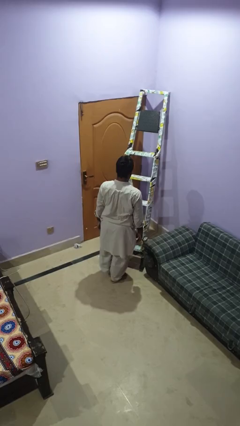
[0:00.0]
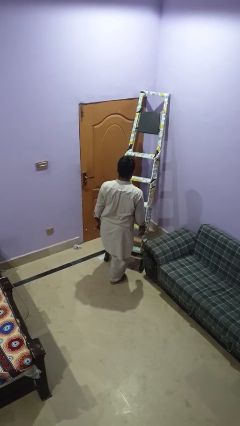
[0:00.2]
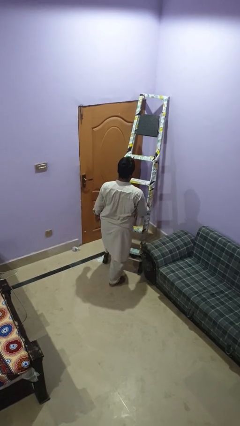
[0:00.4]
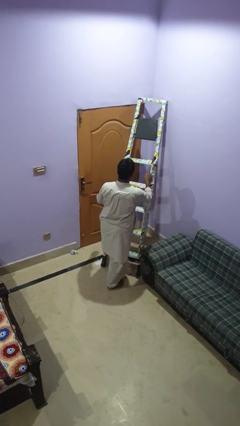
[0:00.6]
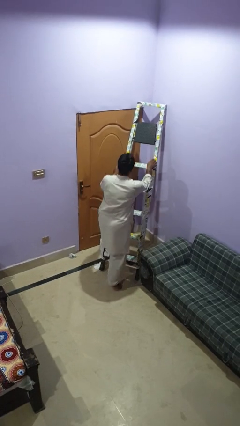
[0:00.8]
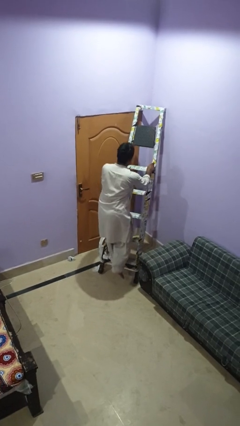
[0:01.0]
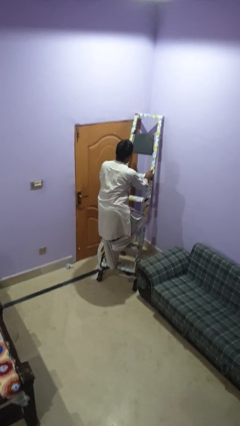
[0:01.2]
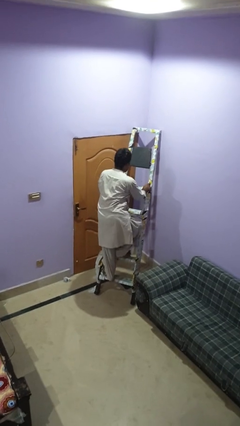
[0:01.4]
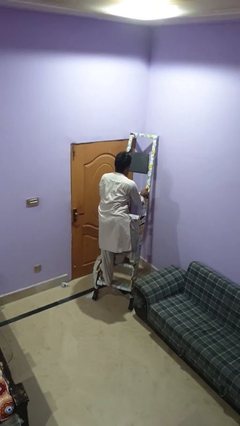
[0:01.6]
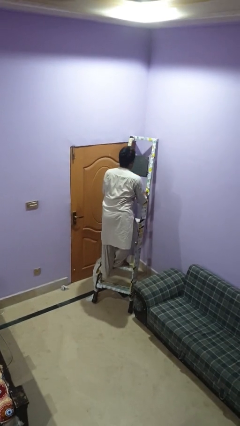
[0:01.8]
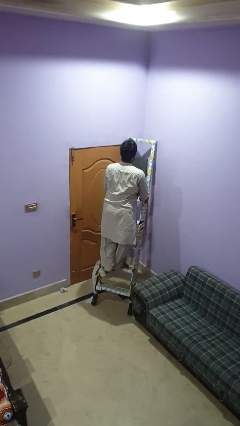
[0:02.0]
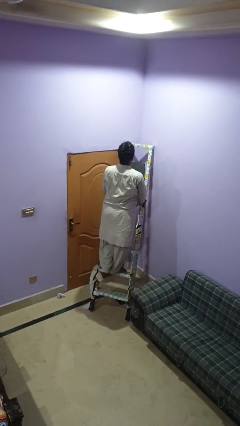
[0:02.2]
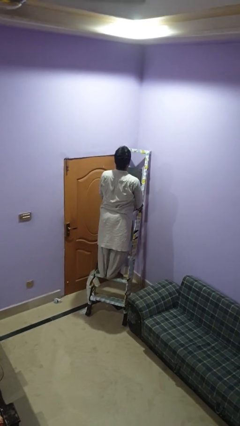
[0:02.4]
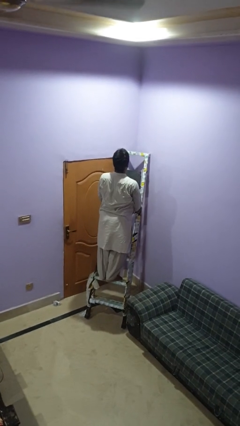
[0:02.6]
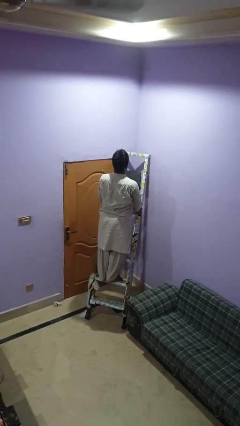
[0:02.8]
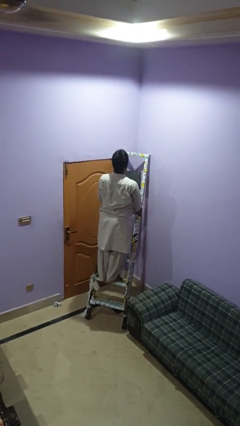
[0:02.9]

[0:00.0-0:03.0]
person climbs up ladder

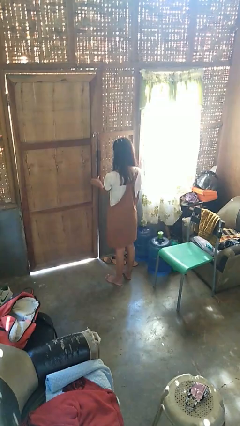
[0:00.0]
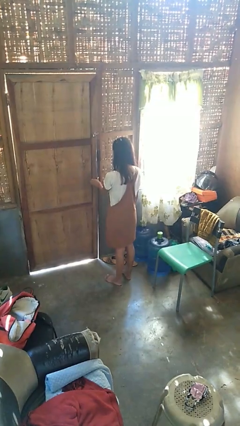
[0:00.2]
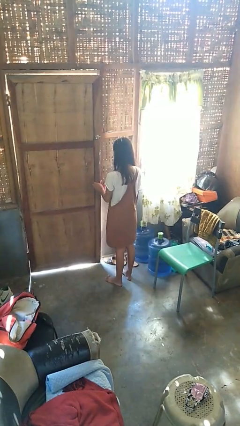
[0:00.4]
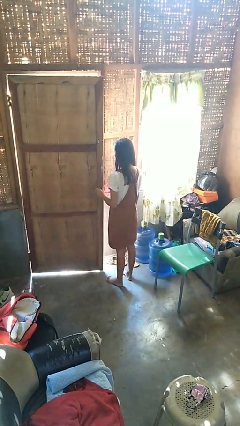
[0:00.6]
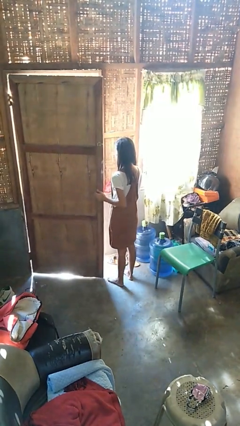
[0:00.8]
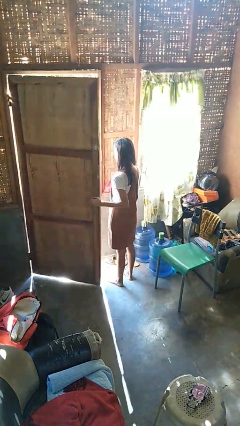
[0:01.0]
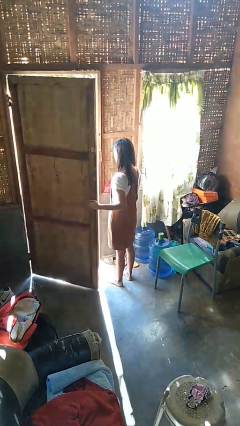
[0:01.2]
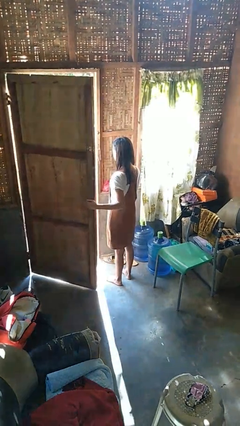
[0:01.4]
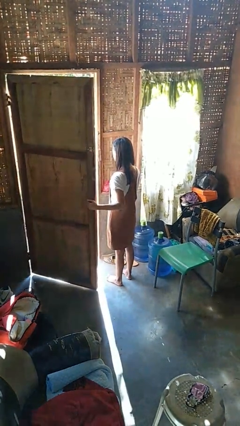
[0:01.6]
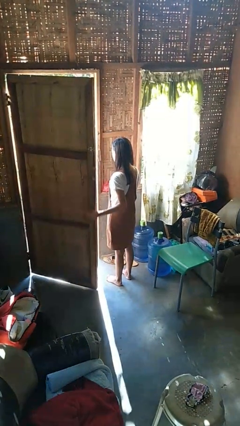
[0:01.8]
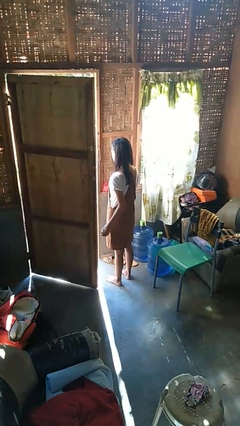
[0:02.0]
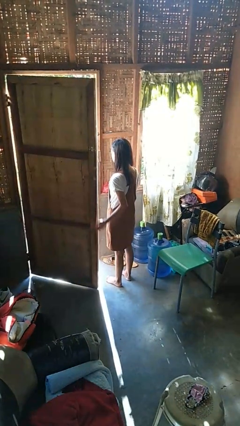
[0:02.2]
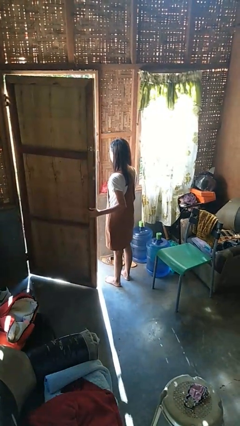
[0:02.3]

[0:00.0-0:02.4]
person opens facility door

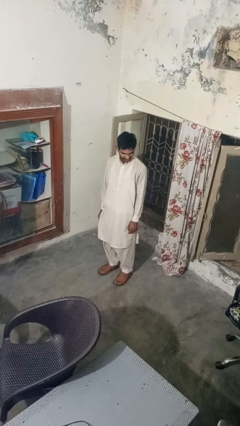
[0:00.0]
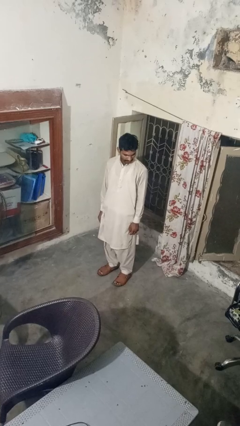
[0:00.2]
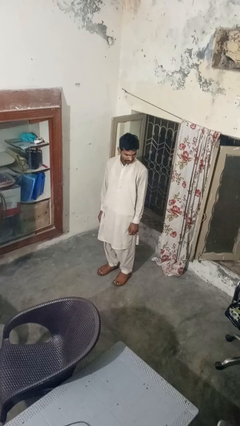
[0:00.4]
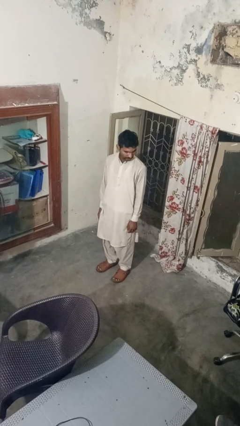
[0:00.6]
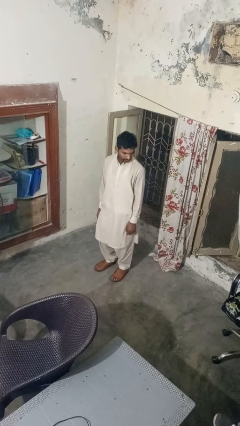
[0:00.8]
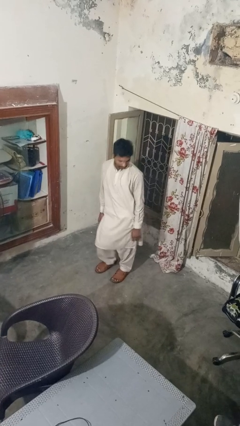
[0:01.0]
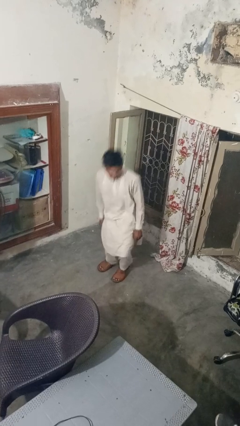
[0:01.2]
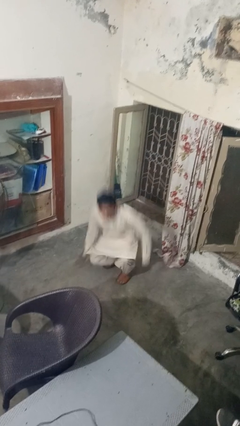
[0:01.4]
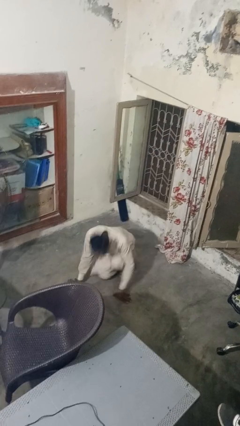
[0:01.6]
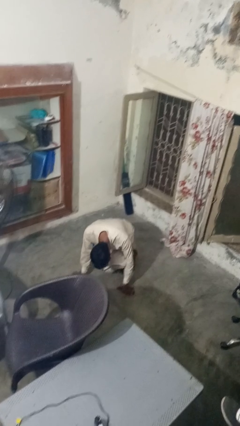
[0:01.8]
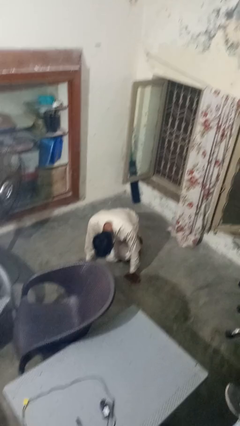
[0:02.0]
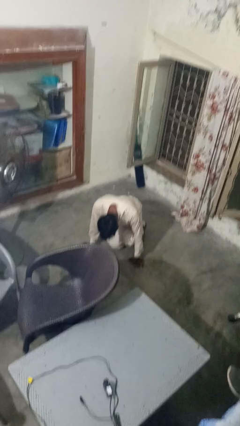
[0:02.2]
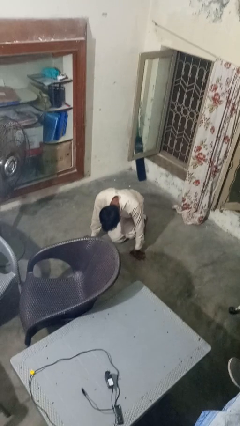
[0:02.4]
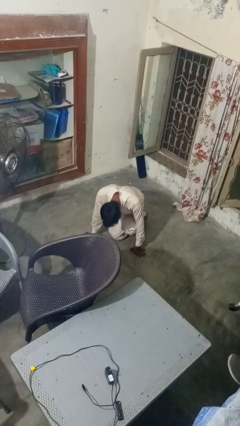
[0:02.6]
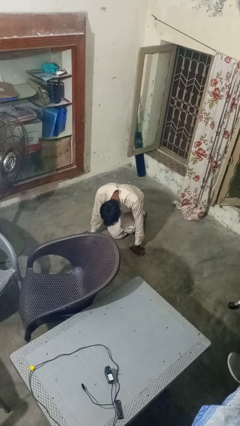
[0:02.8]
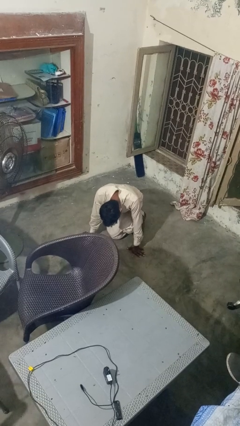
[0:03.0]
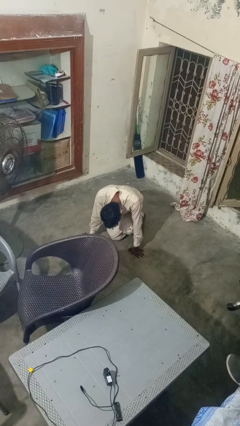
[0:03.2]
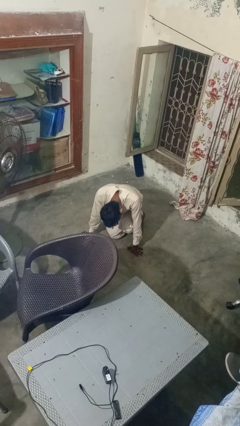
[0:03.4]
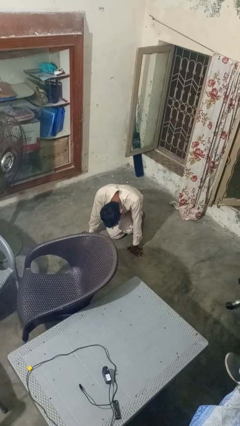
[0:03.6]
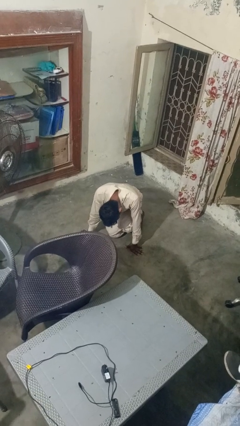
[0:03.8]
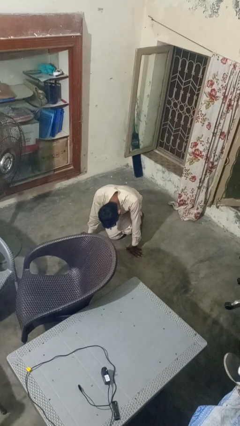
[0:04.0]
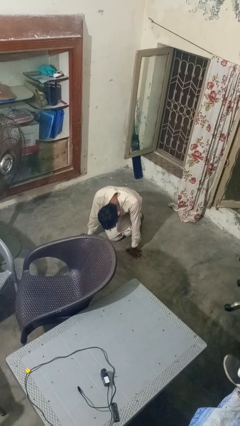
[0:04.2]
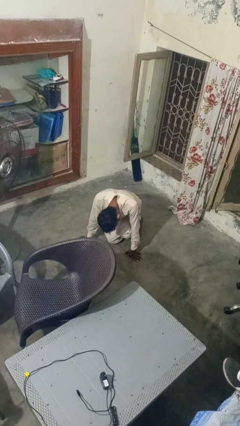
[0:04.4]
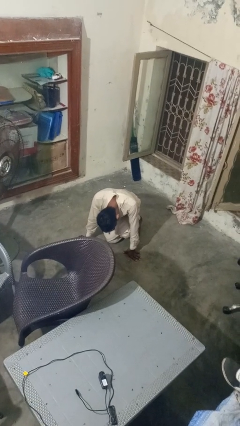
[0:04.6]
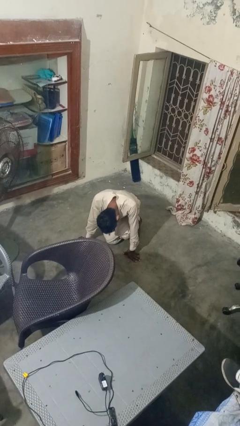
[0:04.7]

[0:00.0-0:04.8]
person falls while standing

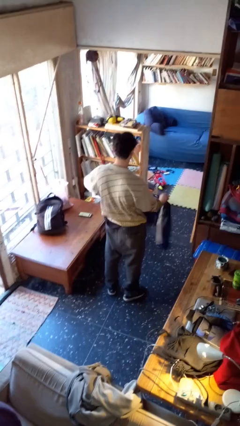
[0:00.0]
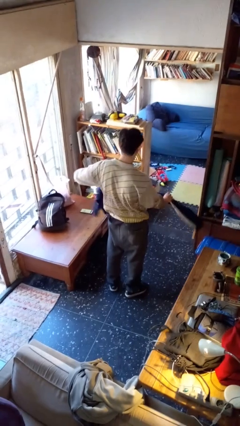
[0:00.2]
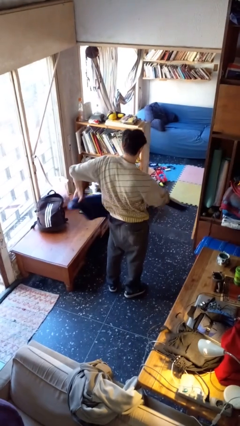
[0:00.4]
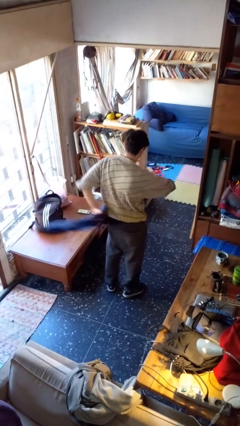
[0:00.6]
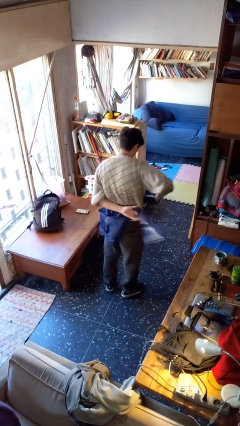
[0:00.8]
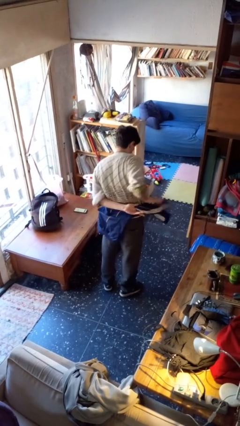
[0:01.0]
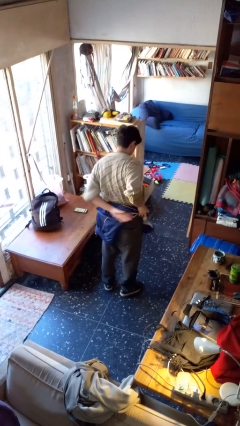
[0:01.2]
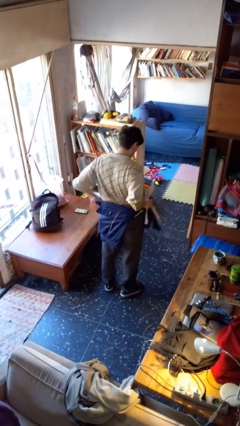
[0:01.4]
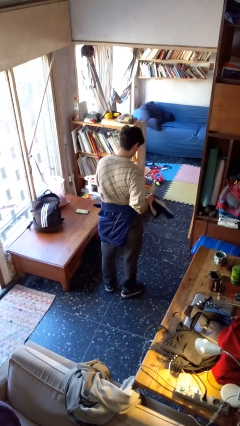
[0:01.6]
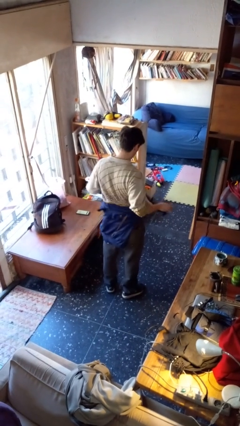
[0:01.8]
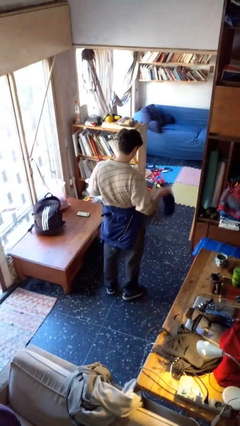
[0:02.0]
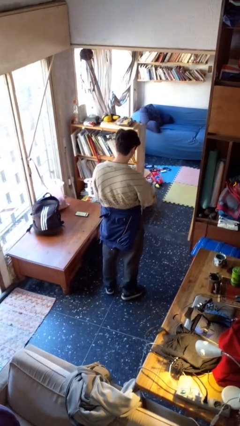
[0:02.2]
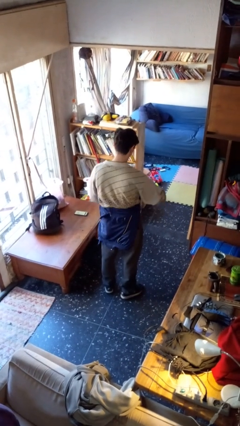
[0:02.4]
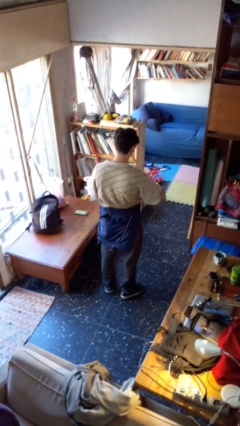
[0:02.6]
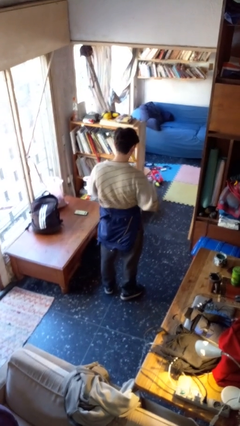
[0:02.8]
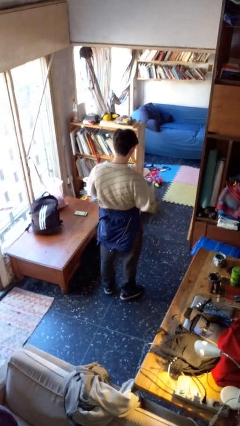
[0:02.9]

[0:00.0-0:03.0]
person ties jacket around waist

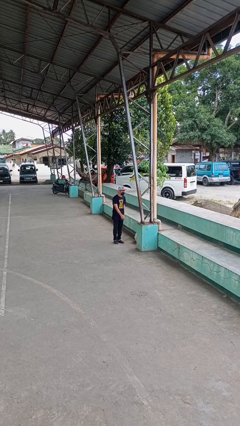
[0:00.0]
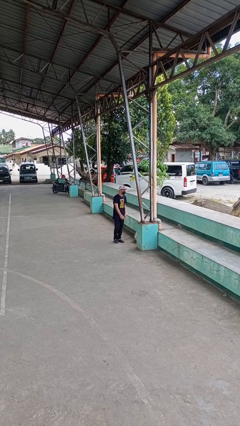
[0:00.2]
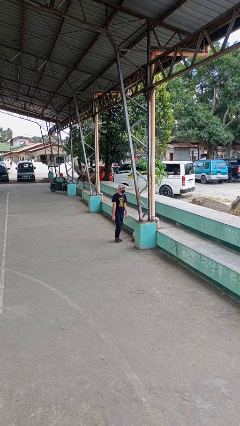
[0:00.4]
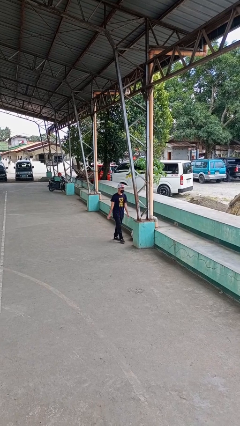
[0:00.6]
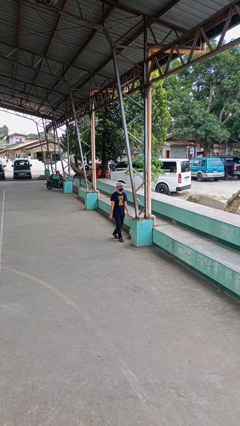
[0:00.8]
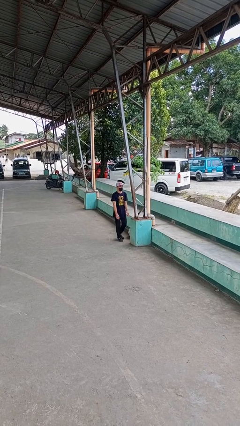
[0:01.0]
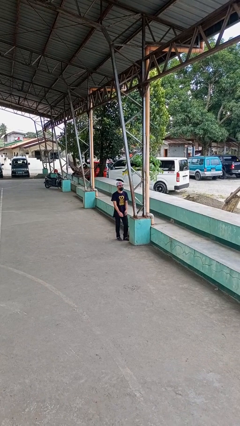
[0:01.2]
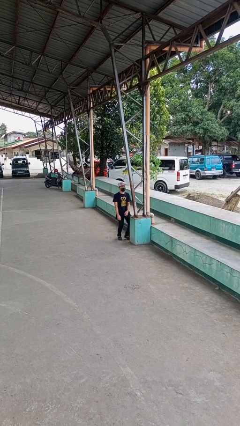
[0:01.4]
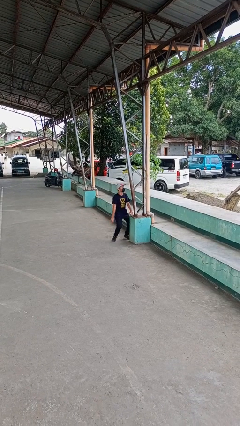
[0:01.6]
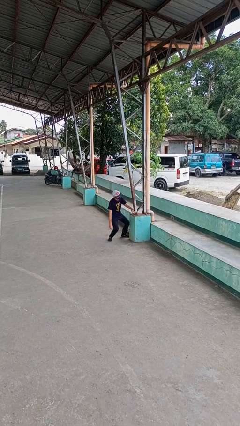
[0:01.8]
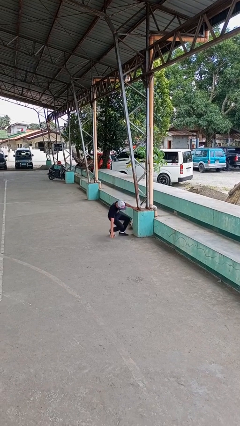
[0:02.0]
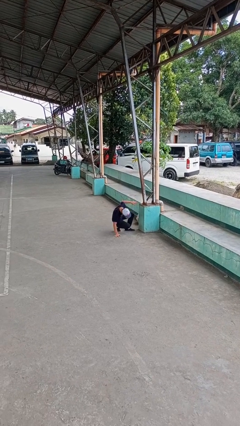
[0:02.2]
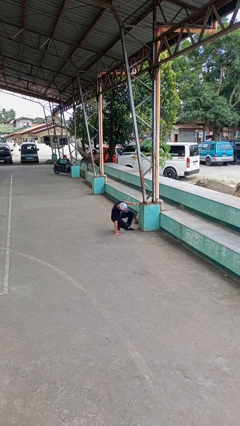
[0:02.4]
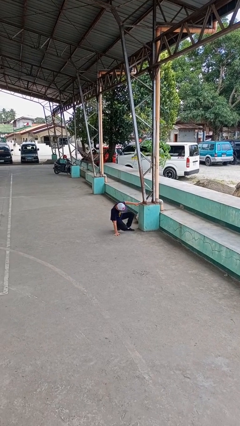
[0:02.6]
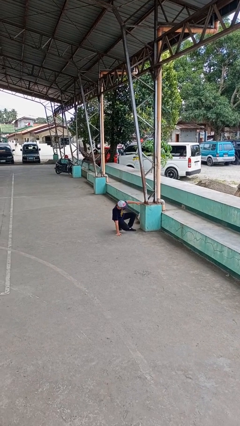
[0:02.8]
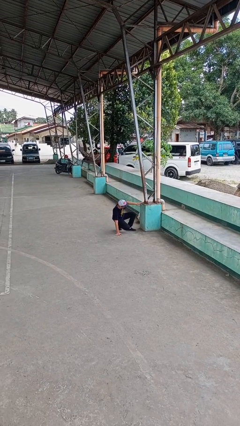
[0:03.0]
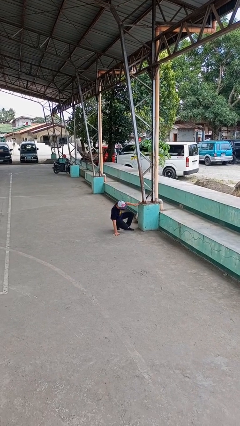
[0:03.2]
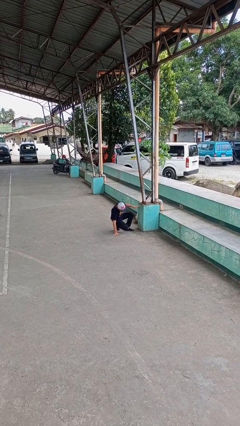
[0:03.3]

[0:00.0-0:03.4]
person trips on object on floor

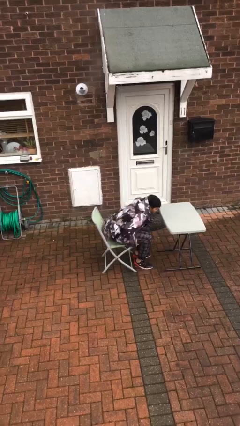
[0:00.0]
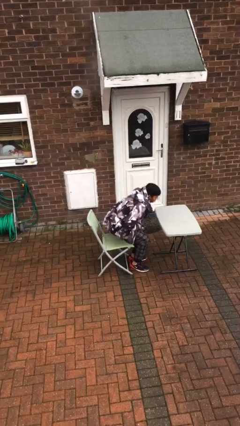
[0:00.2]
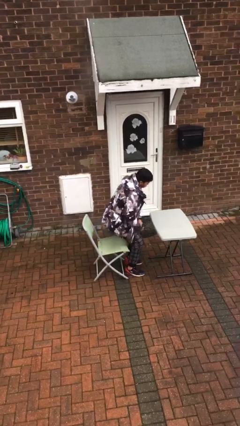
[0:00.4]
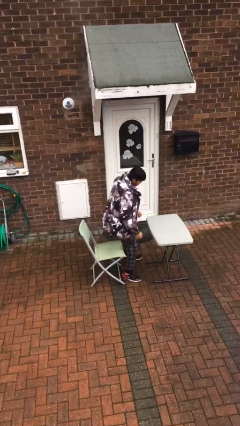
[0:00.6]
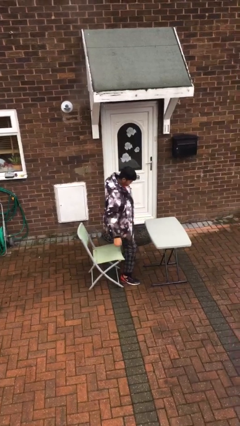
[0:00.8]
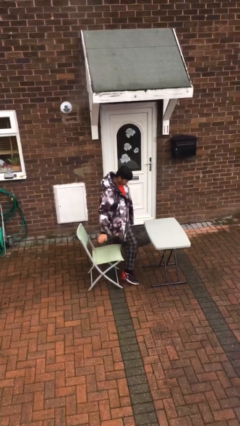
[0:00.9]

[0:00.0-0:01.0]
person stands up
